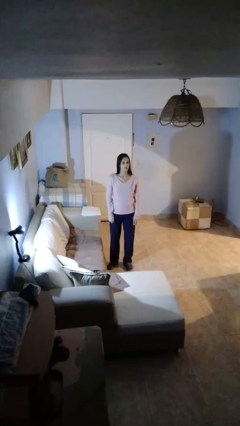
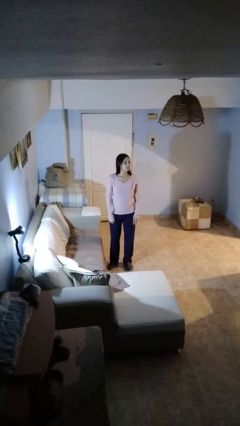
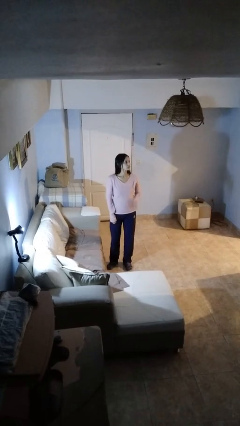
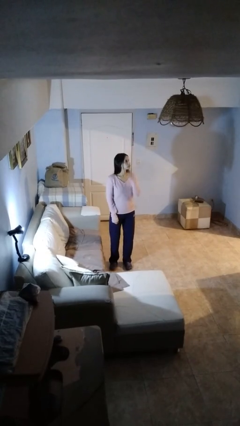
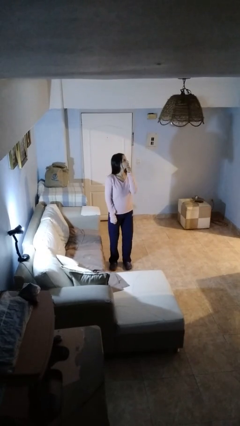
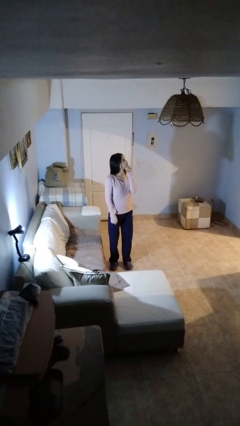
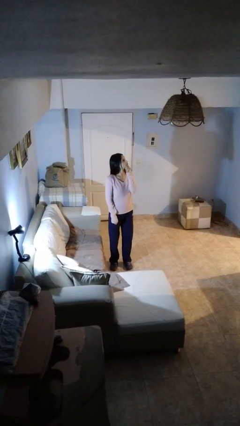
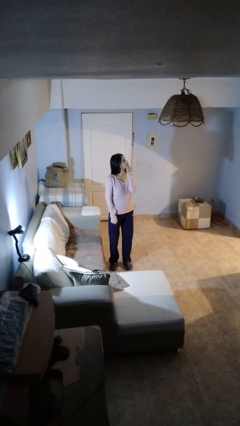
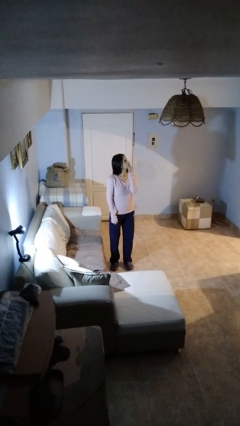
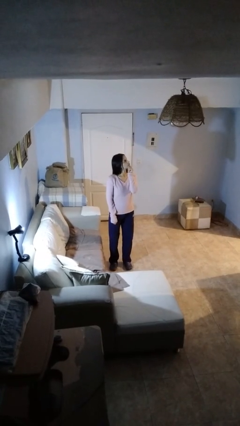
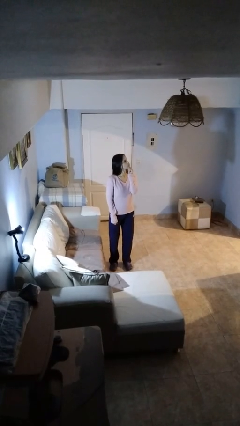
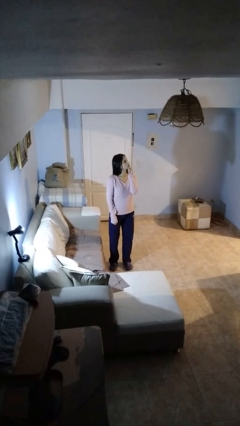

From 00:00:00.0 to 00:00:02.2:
person strokes chin

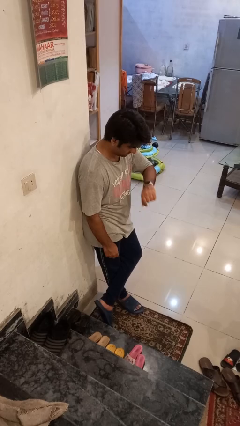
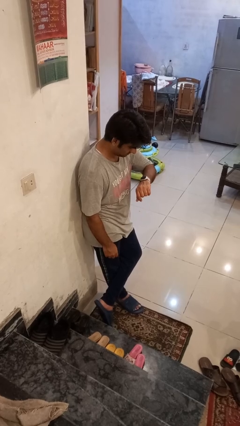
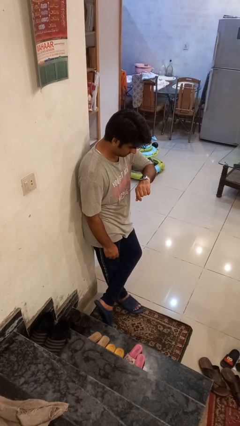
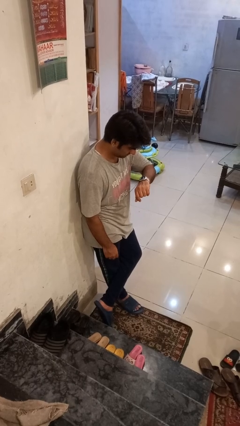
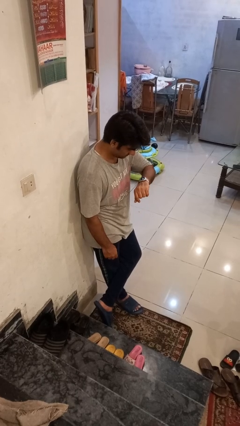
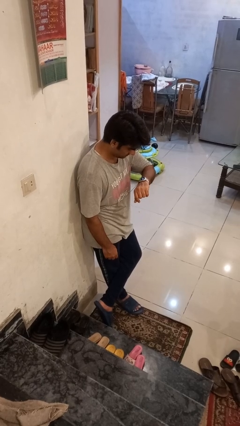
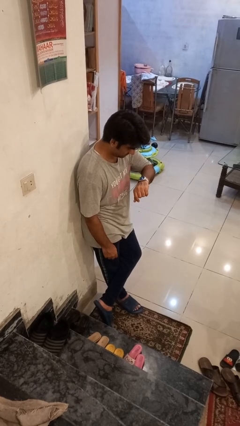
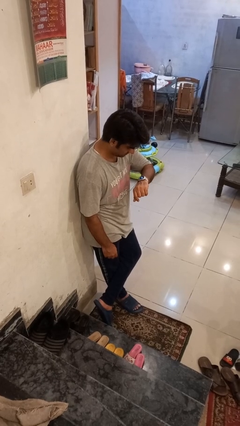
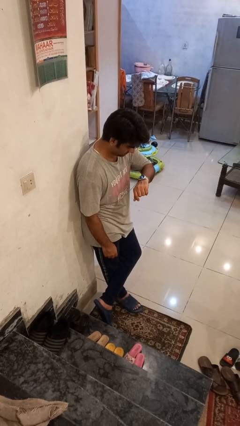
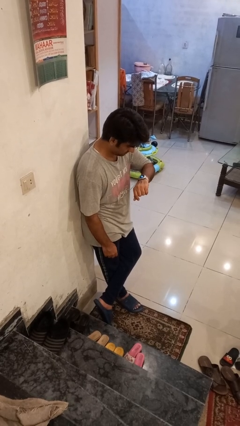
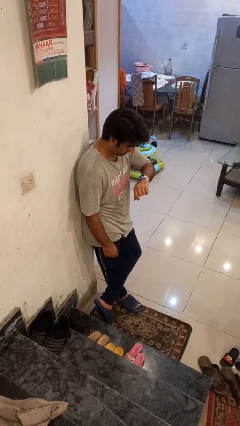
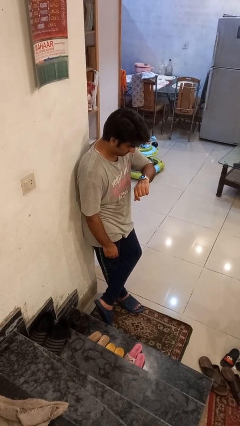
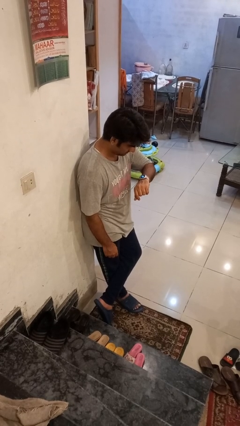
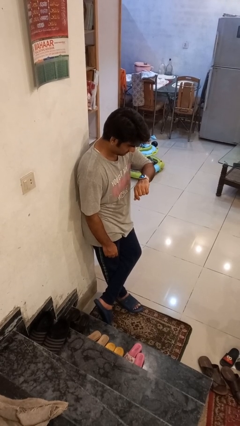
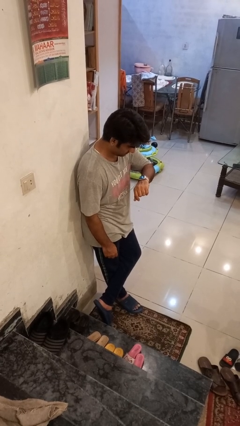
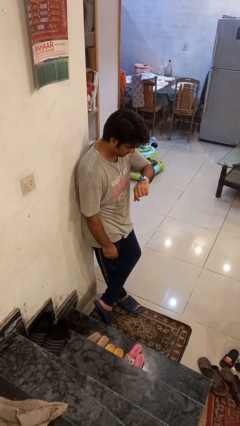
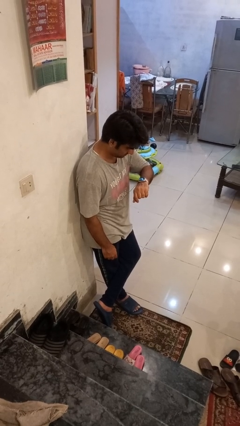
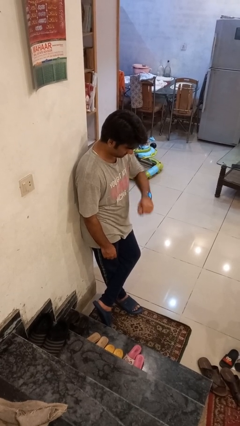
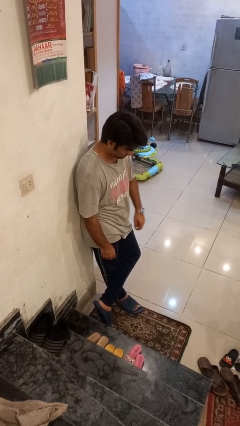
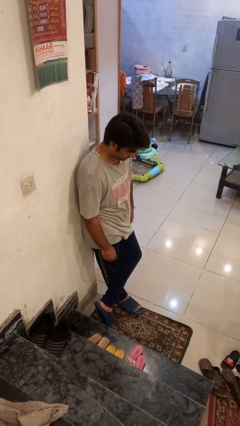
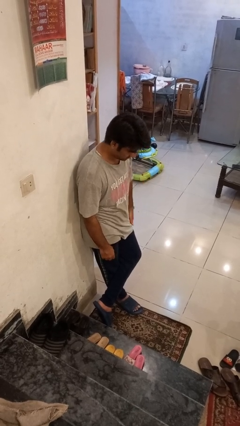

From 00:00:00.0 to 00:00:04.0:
person looks at wristwatch

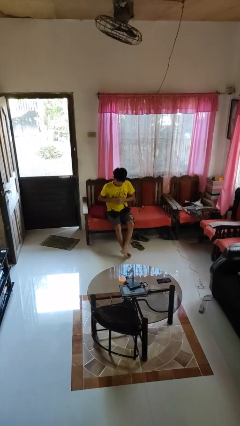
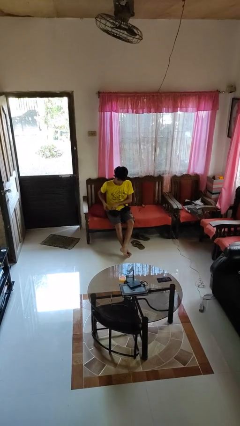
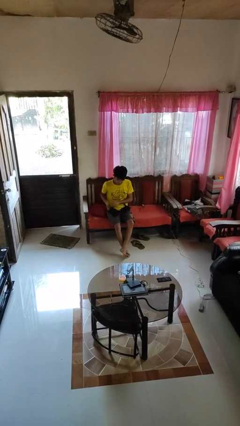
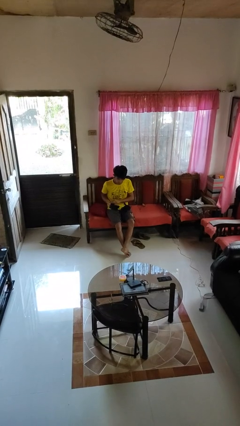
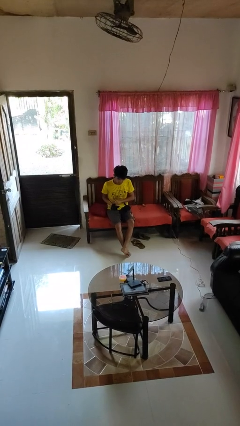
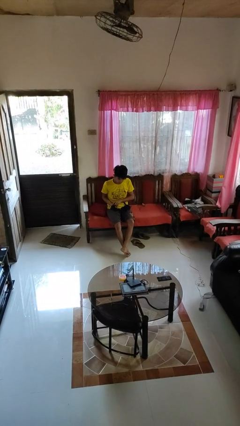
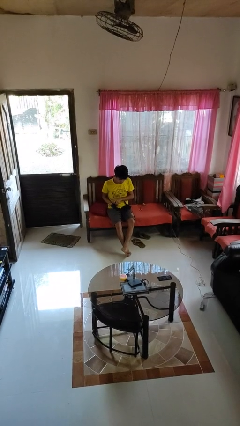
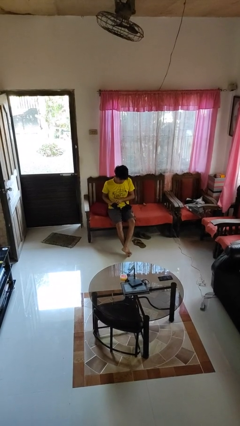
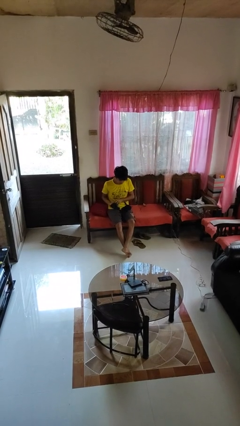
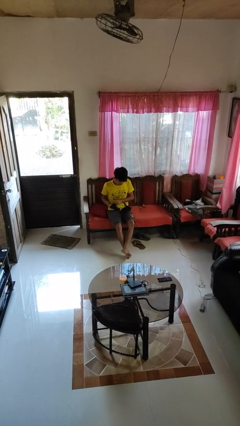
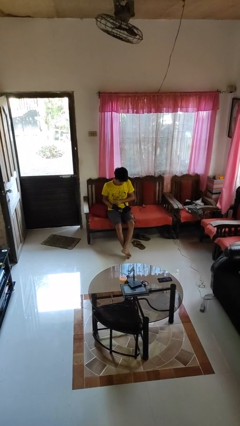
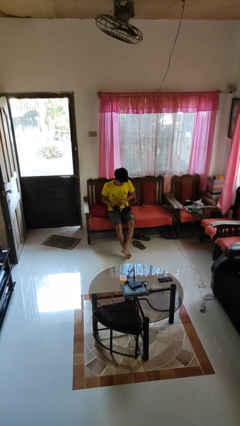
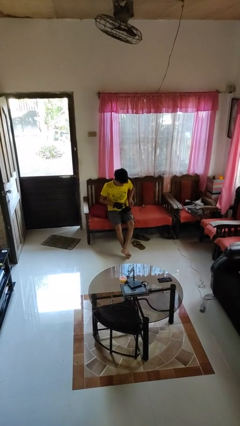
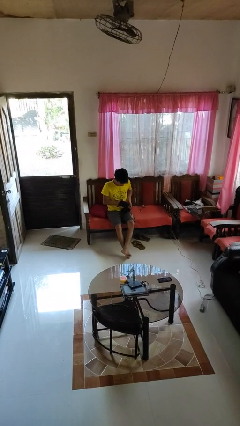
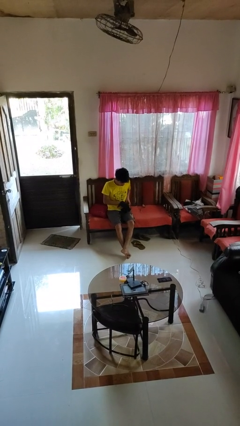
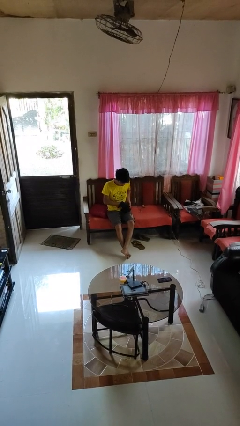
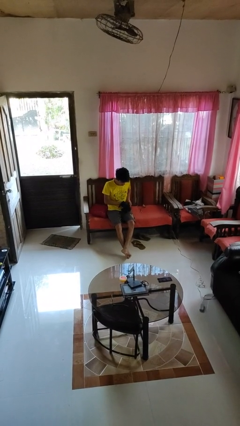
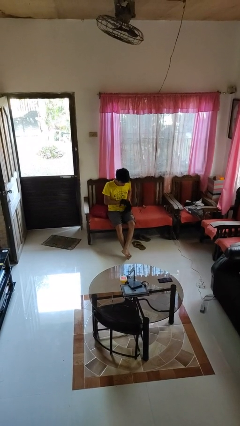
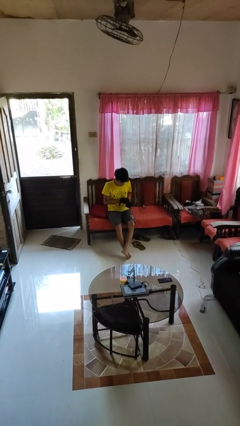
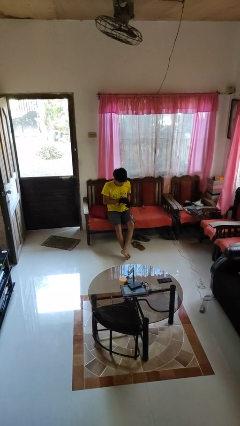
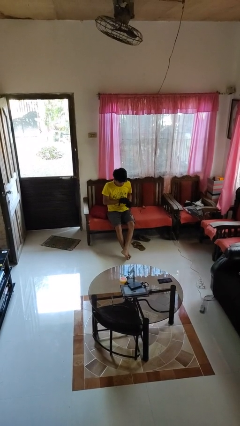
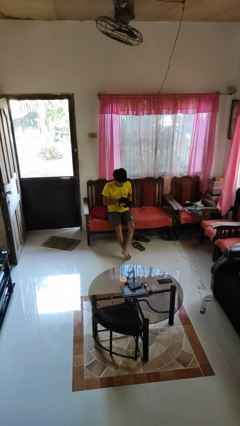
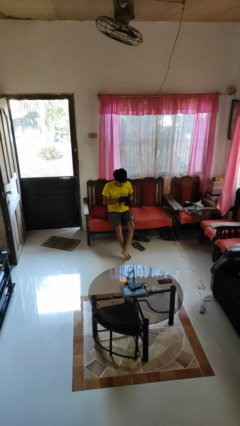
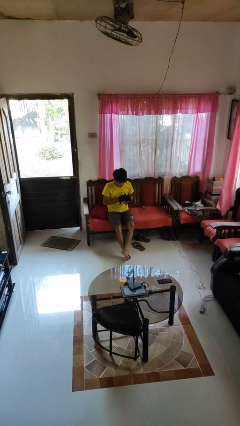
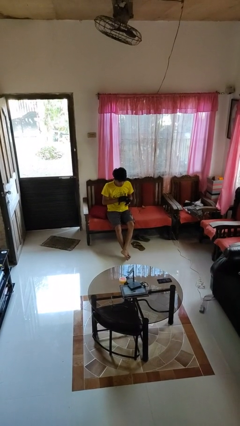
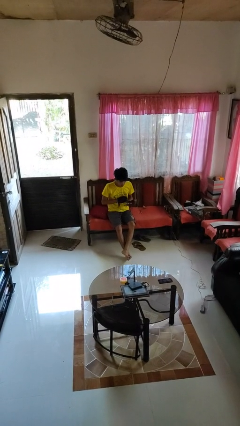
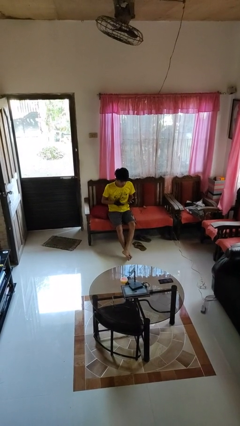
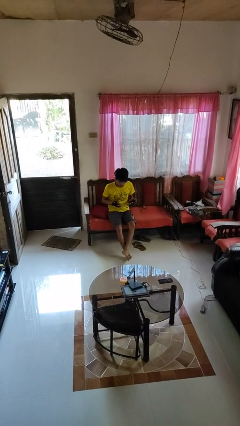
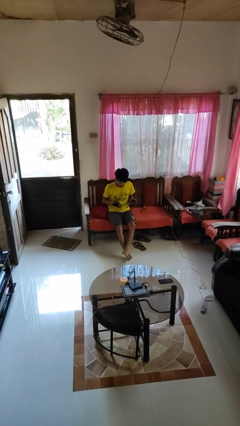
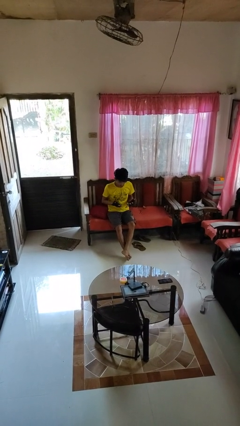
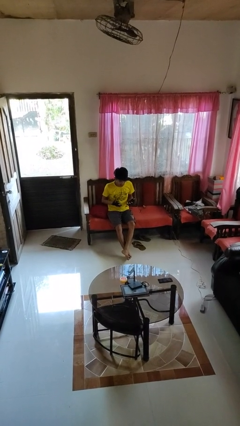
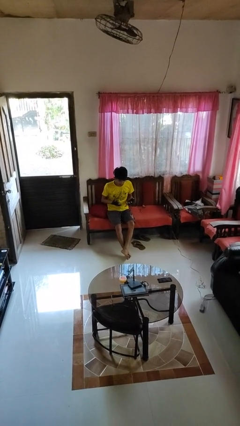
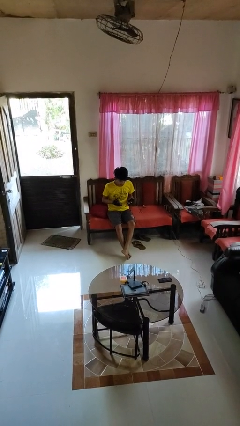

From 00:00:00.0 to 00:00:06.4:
person puts on gloves

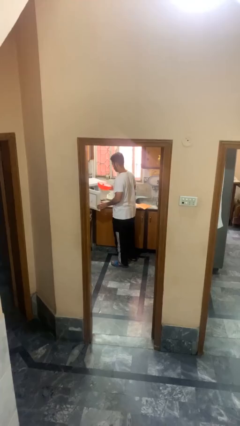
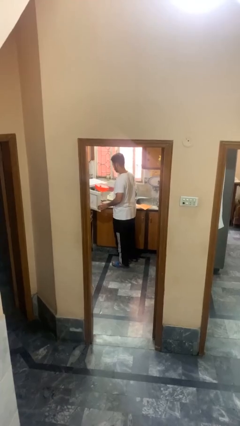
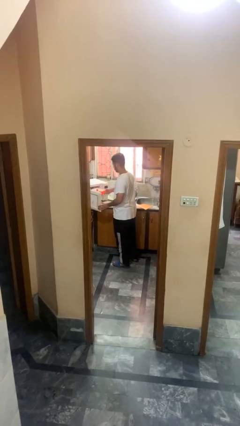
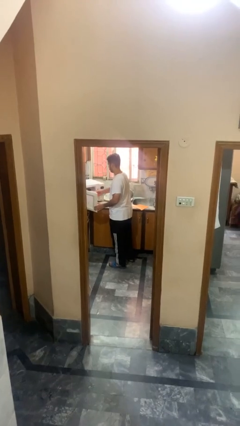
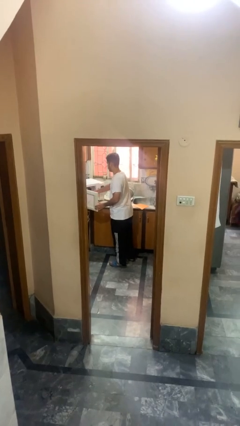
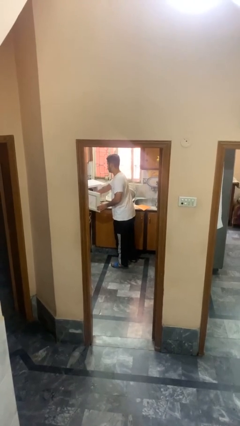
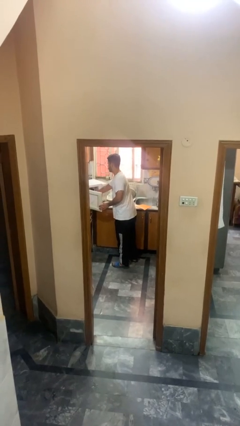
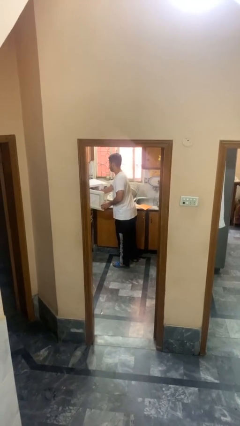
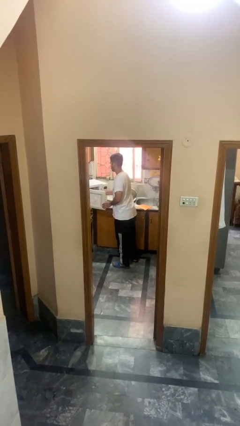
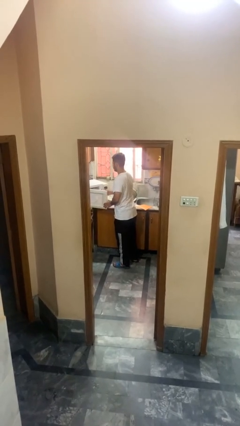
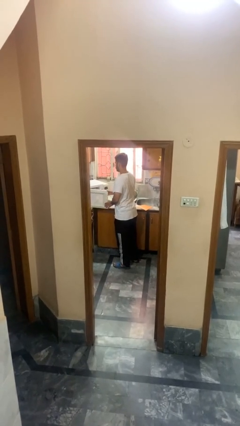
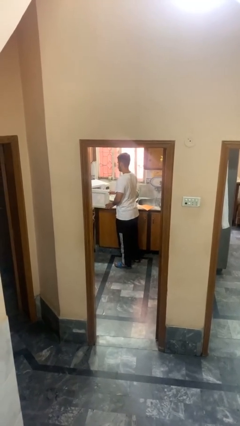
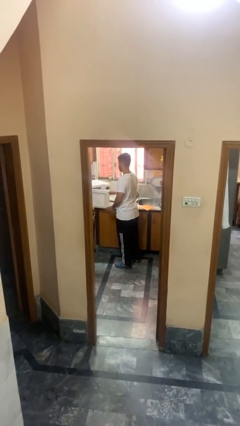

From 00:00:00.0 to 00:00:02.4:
person puts object into microwave

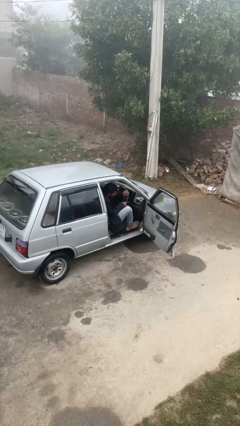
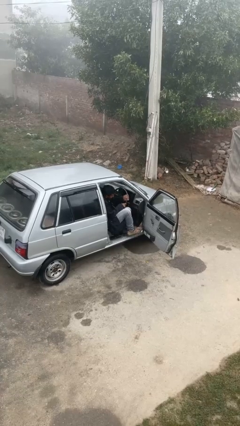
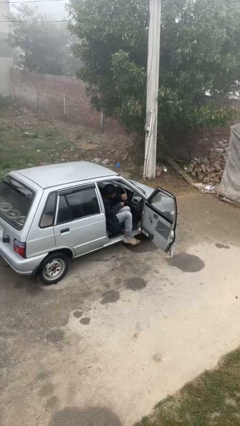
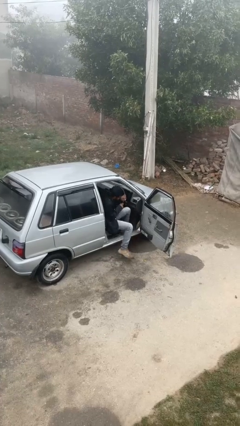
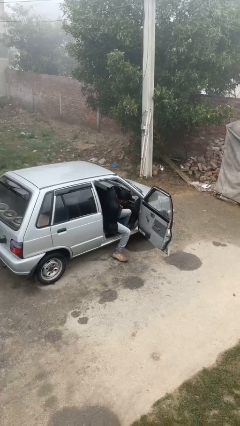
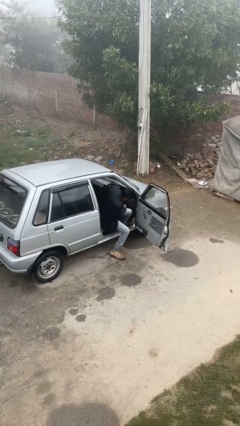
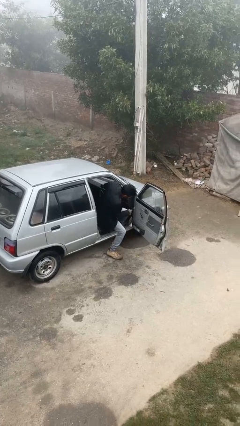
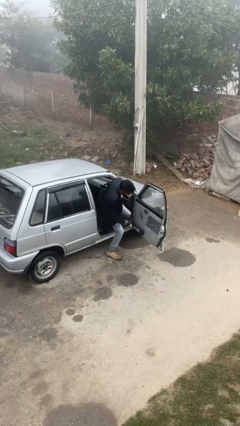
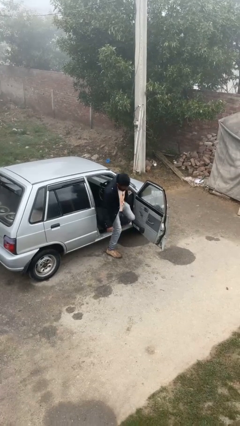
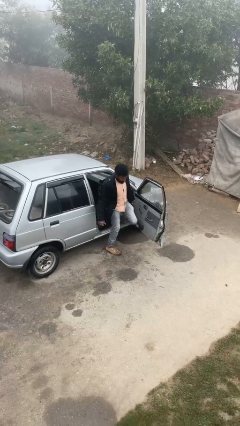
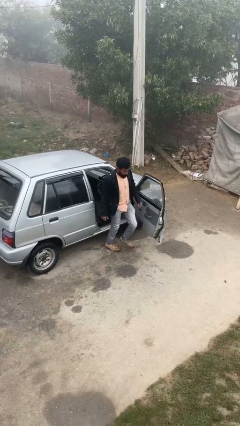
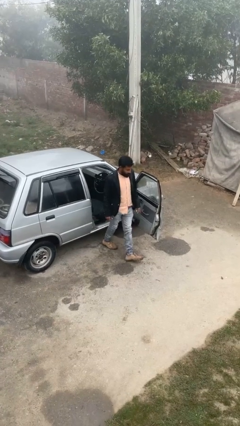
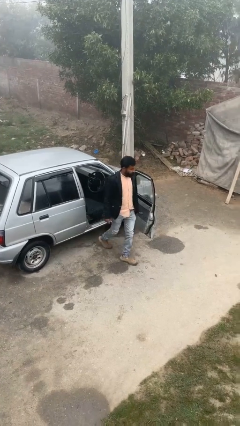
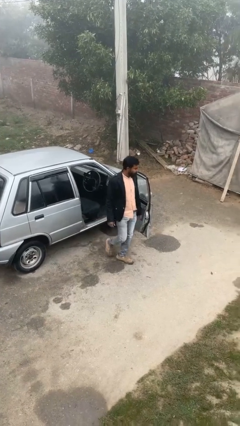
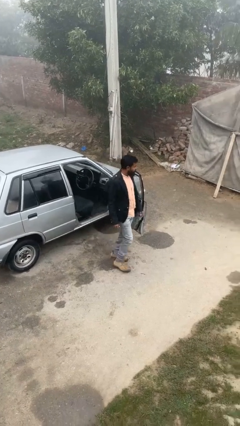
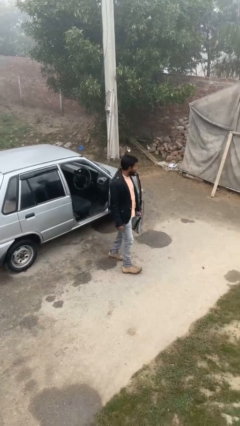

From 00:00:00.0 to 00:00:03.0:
person exits car
